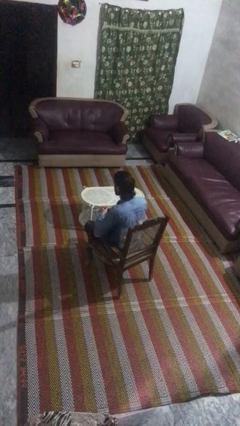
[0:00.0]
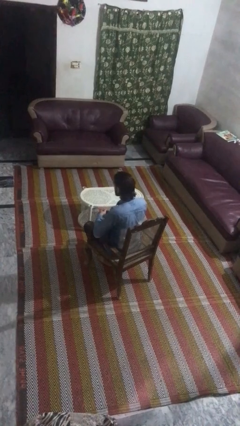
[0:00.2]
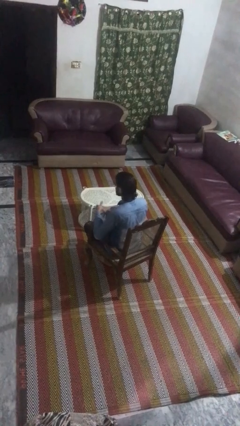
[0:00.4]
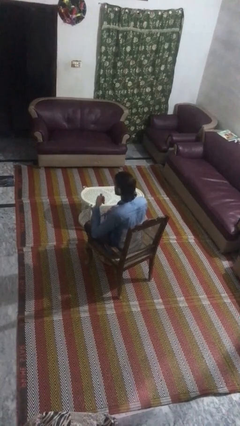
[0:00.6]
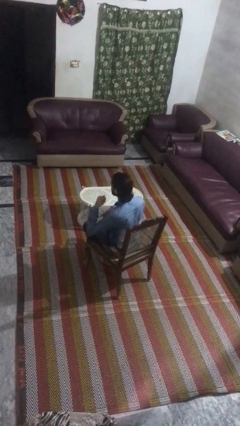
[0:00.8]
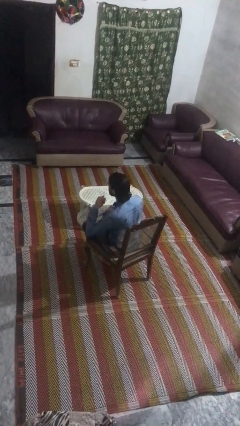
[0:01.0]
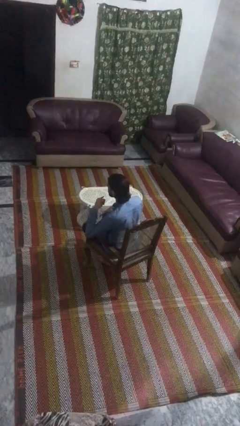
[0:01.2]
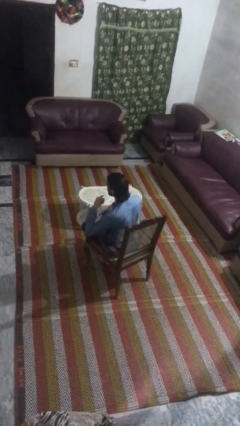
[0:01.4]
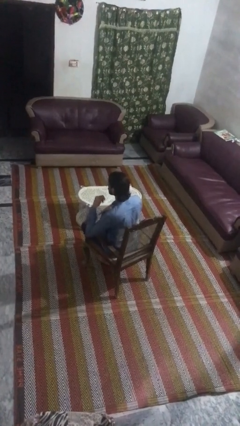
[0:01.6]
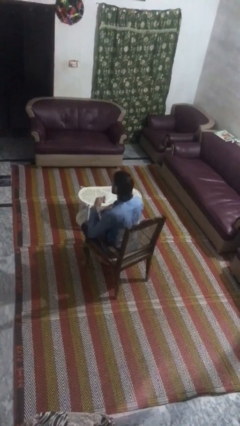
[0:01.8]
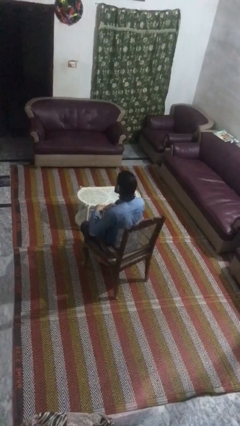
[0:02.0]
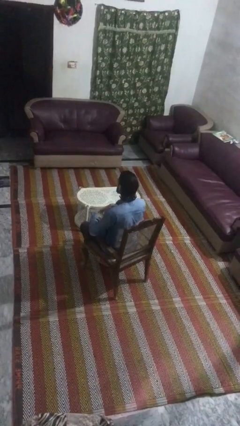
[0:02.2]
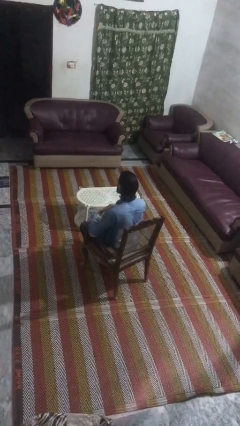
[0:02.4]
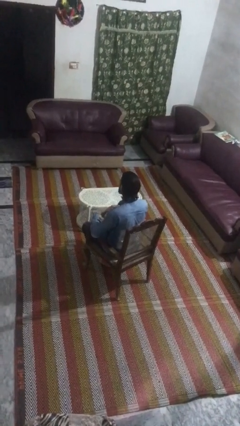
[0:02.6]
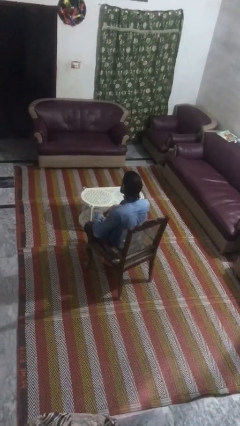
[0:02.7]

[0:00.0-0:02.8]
person gestures call me

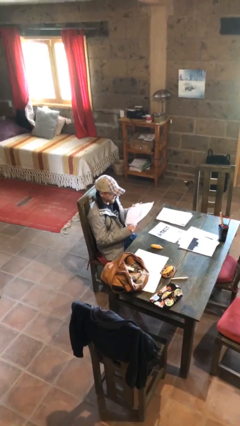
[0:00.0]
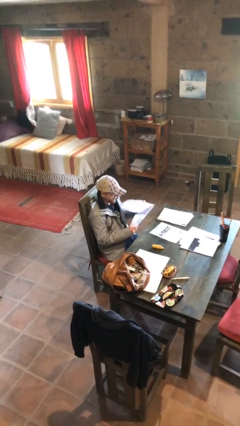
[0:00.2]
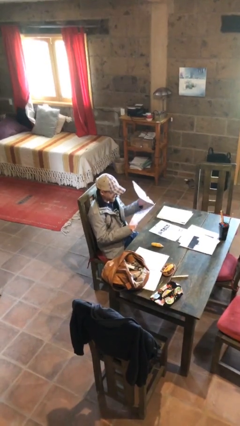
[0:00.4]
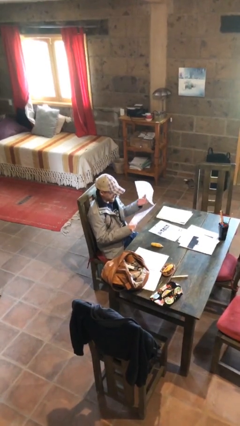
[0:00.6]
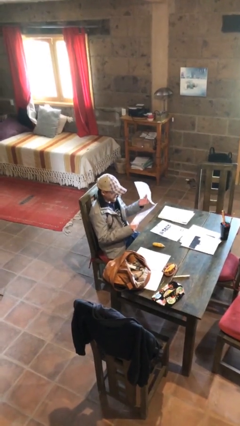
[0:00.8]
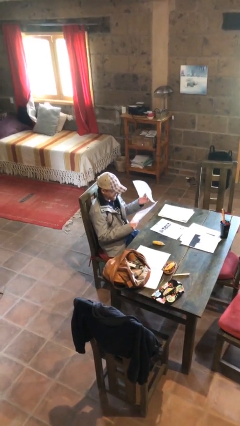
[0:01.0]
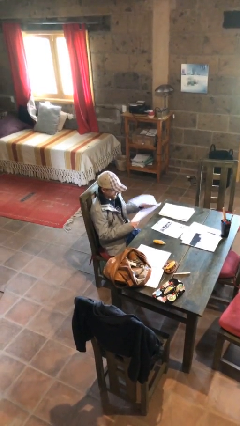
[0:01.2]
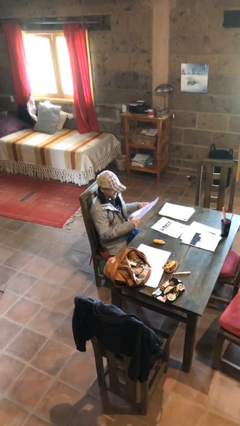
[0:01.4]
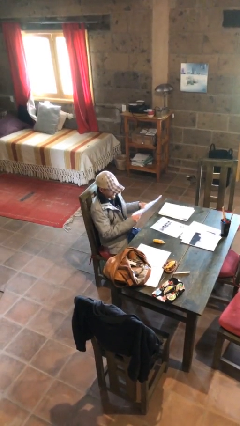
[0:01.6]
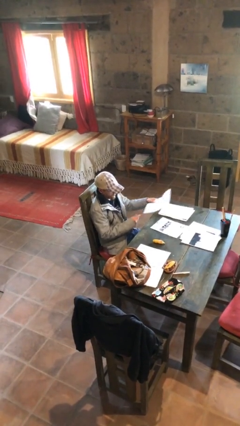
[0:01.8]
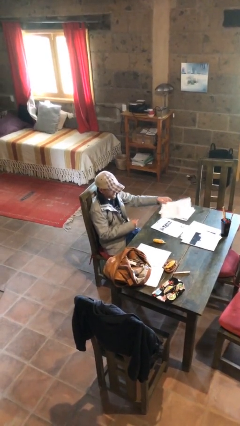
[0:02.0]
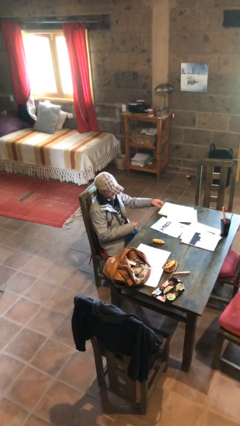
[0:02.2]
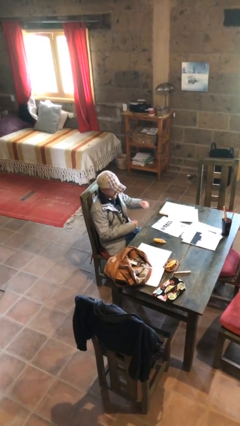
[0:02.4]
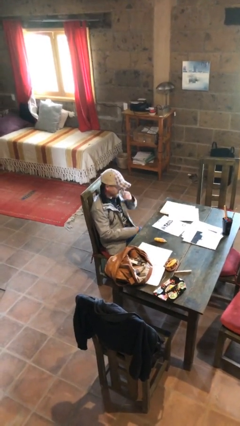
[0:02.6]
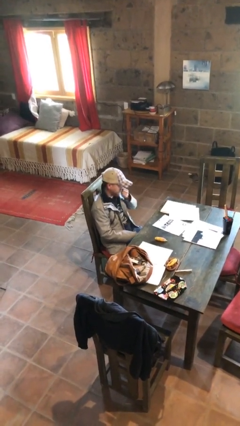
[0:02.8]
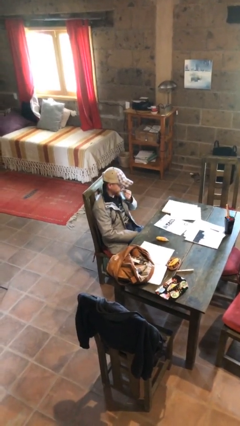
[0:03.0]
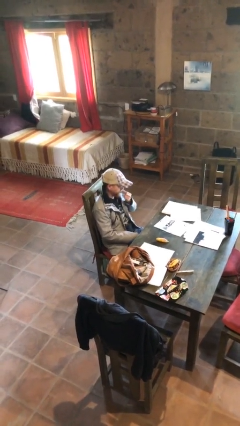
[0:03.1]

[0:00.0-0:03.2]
person puts down object on table

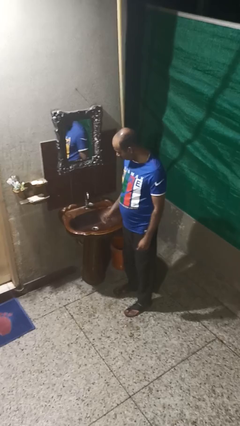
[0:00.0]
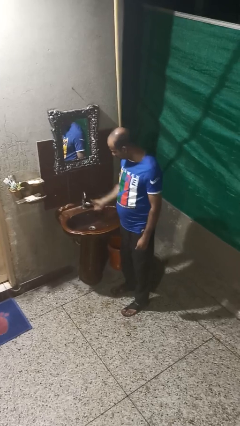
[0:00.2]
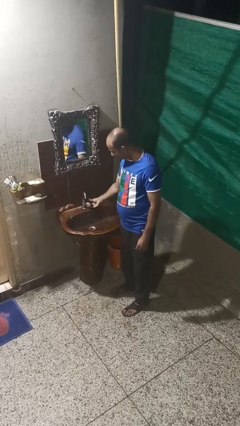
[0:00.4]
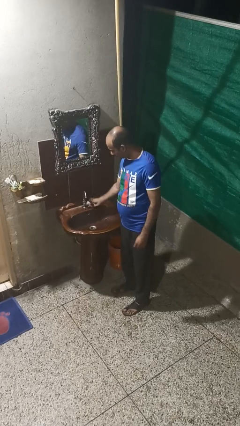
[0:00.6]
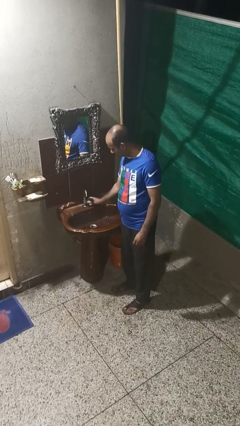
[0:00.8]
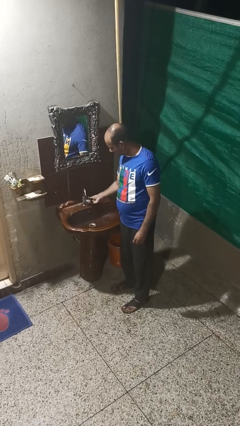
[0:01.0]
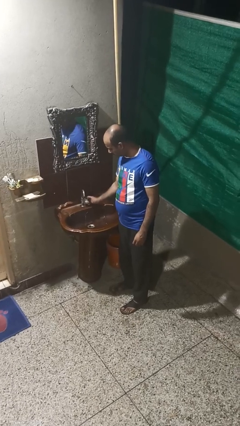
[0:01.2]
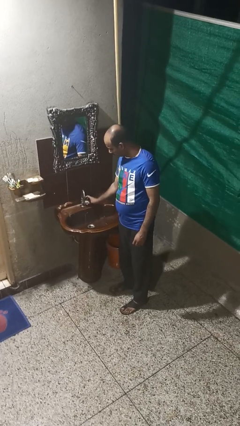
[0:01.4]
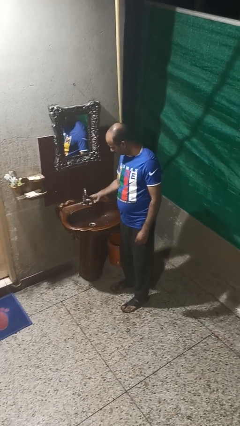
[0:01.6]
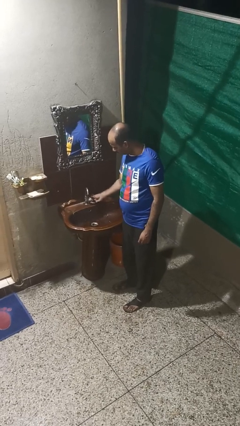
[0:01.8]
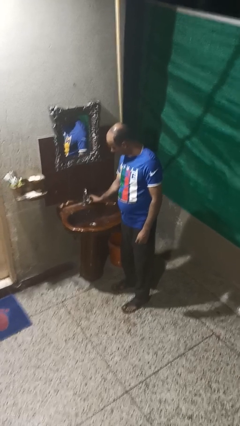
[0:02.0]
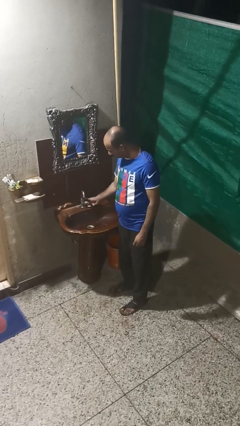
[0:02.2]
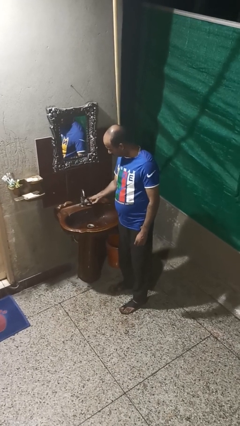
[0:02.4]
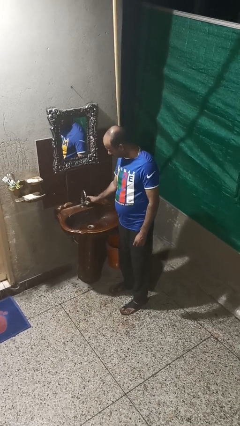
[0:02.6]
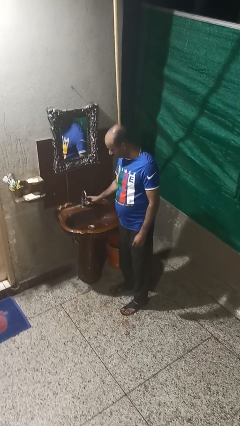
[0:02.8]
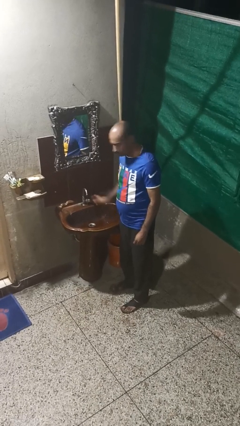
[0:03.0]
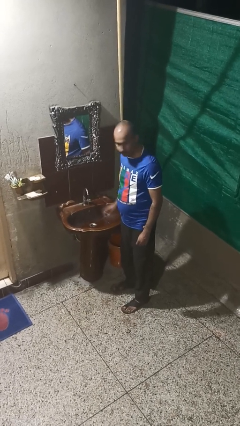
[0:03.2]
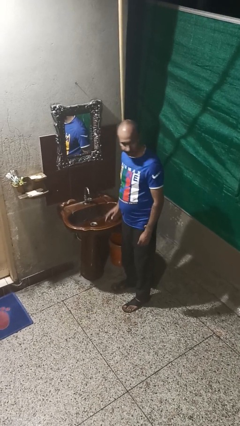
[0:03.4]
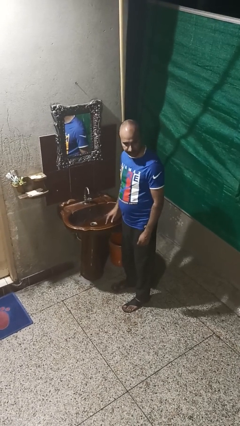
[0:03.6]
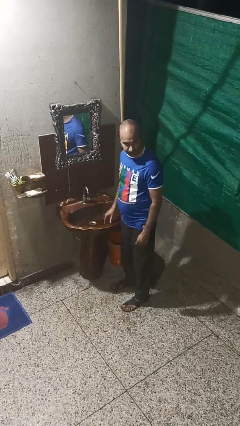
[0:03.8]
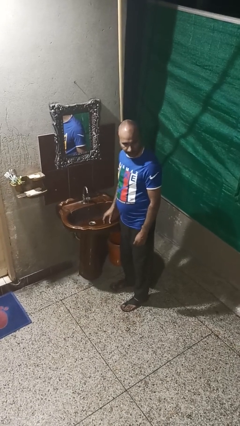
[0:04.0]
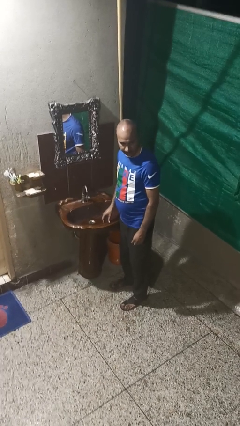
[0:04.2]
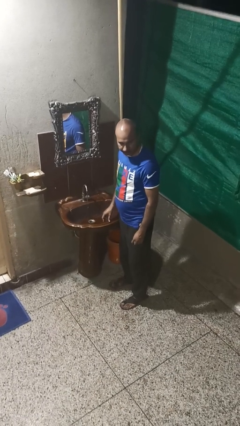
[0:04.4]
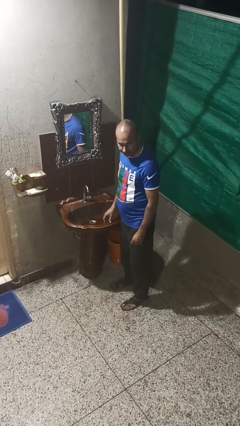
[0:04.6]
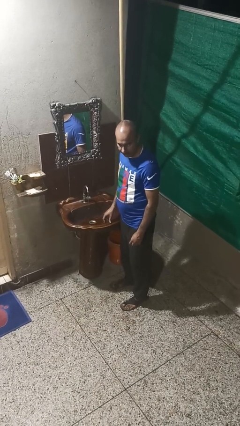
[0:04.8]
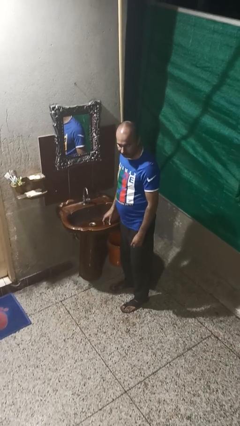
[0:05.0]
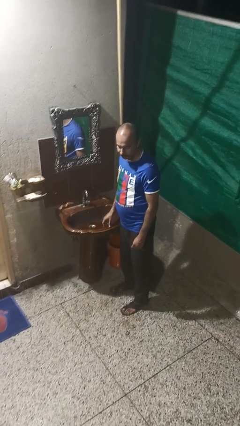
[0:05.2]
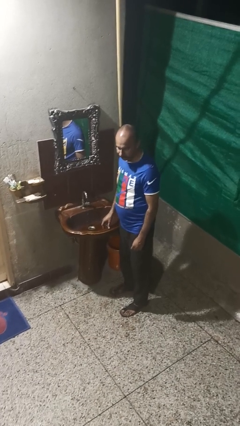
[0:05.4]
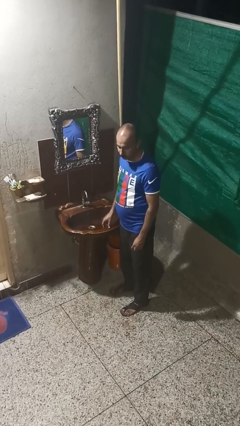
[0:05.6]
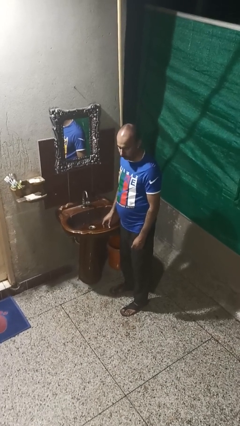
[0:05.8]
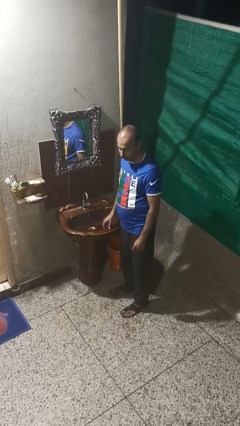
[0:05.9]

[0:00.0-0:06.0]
person turns on faucet

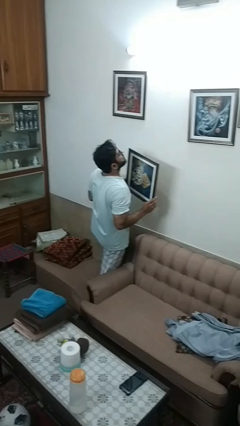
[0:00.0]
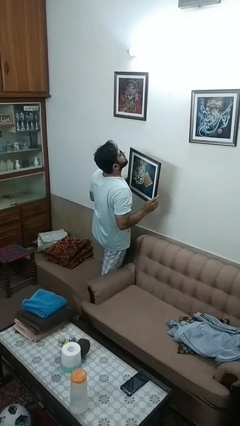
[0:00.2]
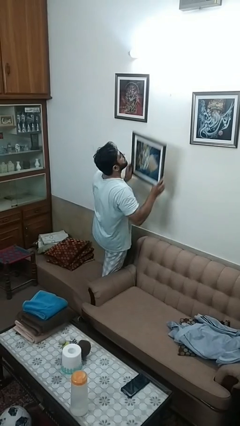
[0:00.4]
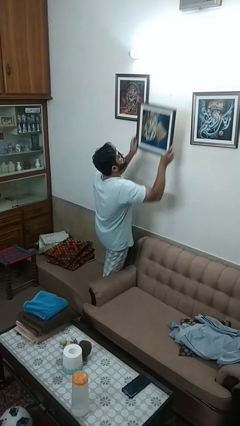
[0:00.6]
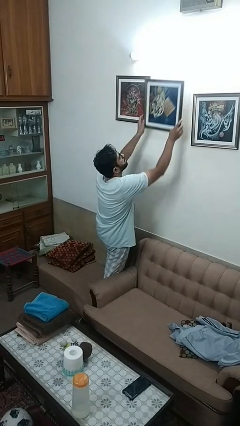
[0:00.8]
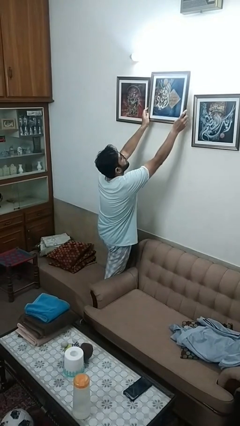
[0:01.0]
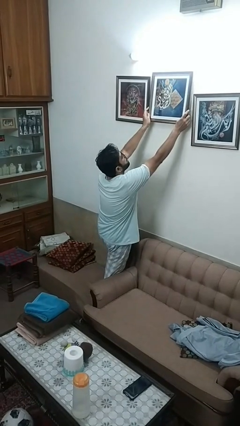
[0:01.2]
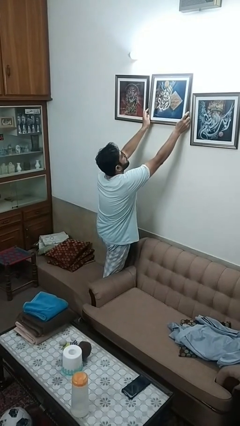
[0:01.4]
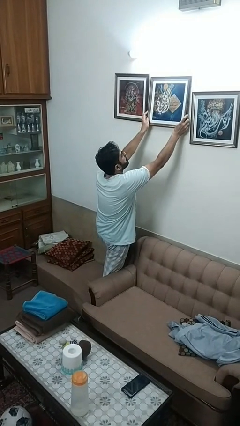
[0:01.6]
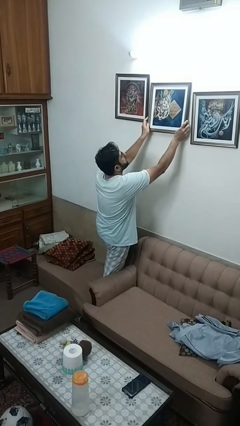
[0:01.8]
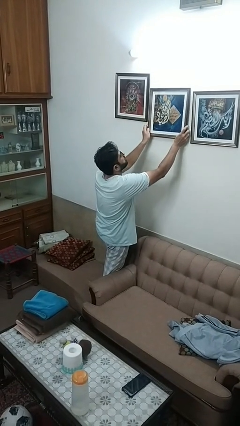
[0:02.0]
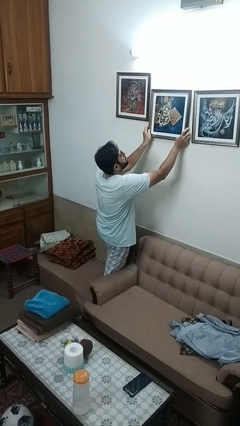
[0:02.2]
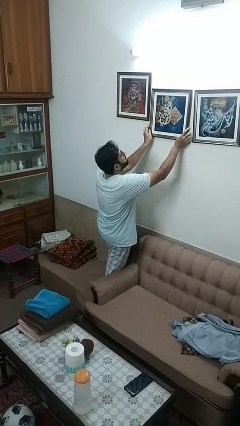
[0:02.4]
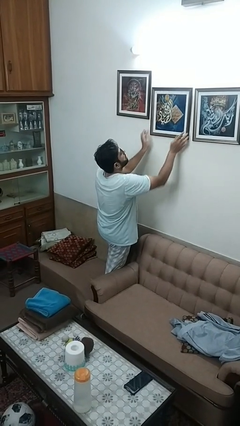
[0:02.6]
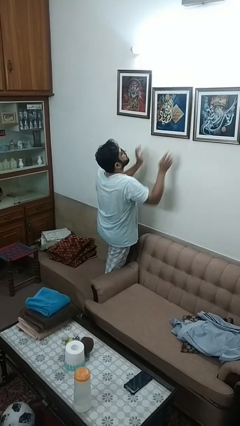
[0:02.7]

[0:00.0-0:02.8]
person puts up picture frame

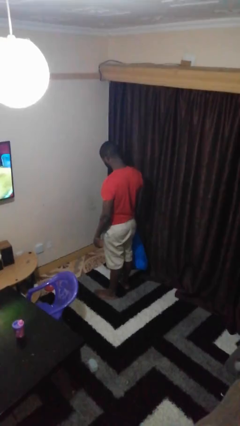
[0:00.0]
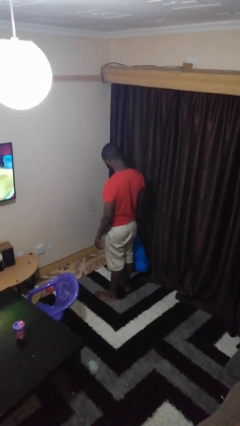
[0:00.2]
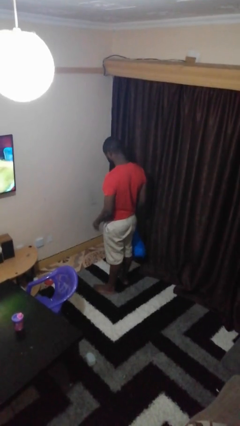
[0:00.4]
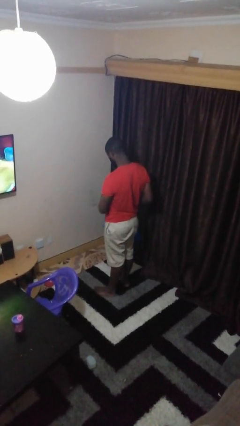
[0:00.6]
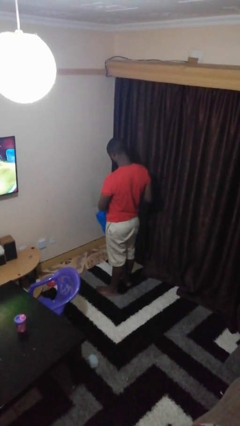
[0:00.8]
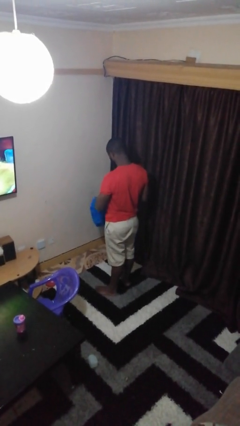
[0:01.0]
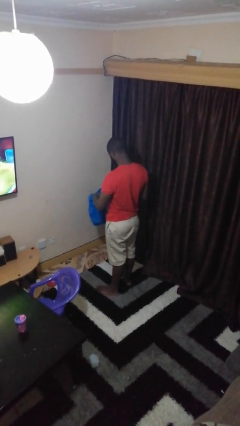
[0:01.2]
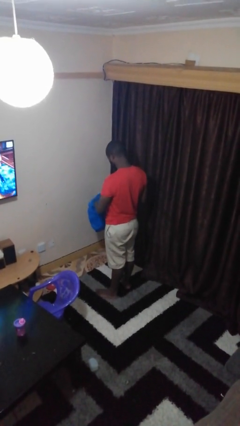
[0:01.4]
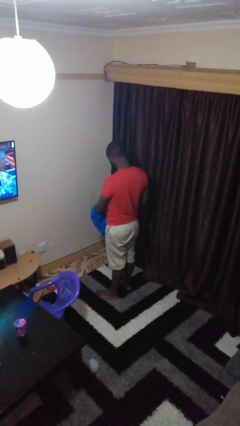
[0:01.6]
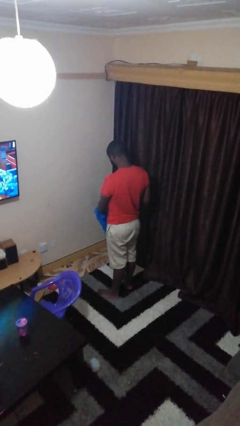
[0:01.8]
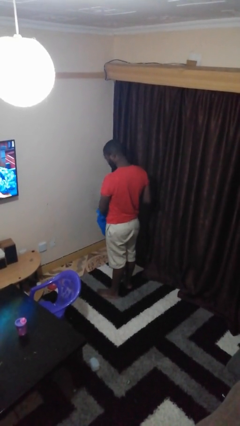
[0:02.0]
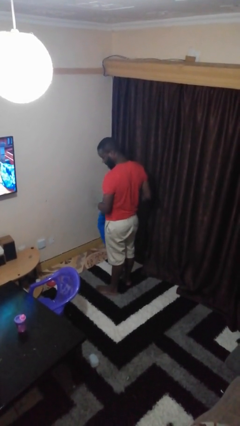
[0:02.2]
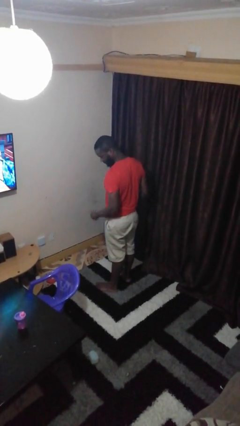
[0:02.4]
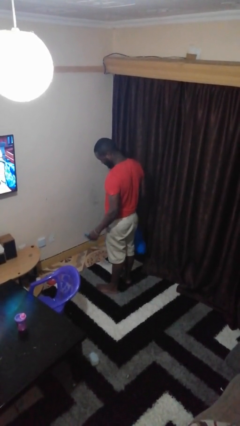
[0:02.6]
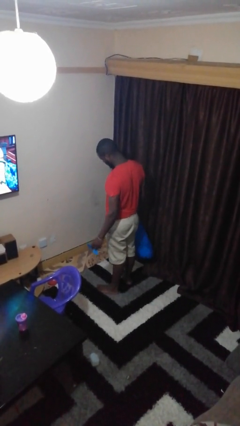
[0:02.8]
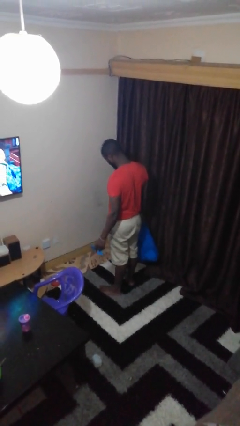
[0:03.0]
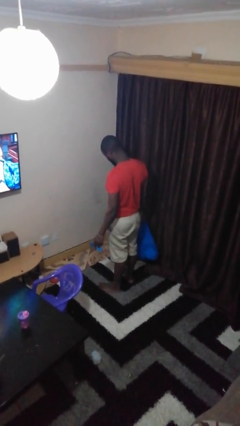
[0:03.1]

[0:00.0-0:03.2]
person takes object from bag
